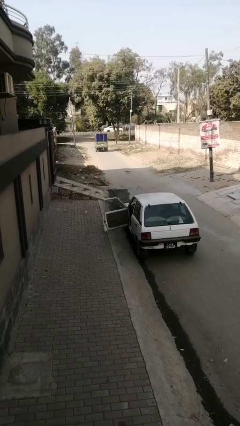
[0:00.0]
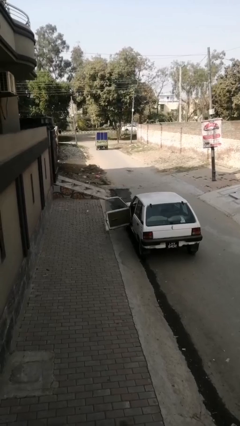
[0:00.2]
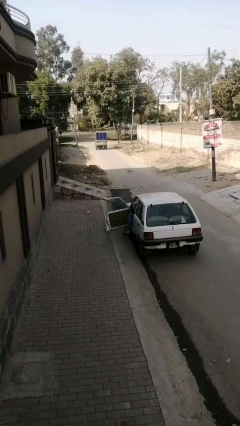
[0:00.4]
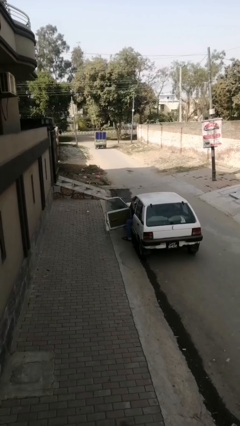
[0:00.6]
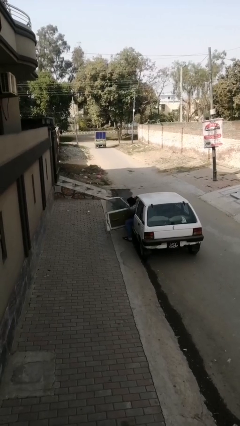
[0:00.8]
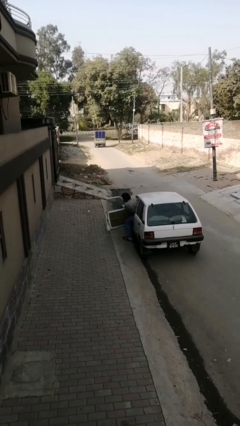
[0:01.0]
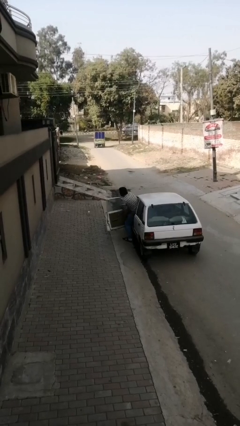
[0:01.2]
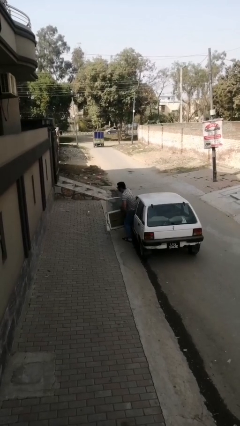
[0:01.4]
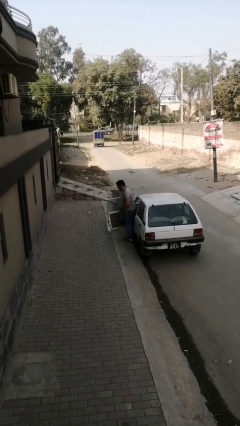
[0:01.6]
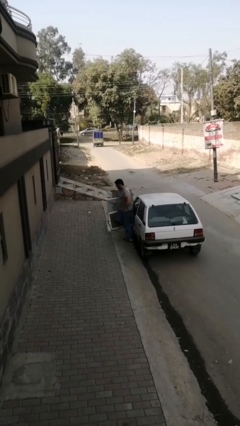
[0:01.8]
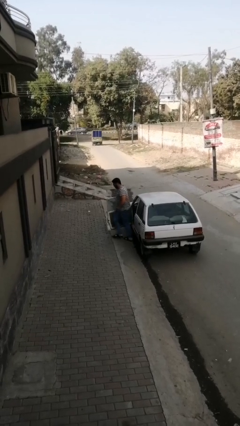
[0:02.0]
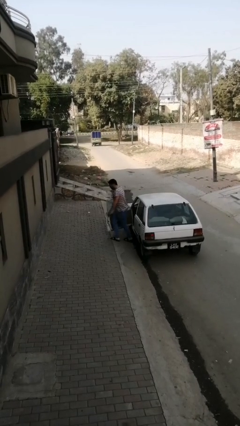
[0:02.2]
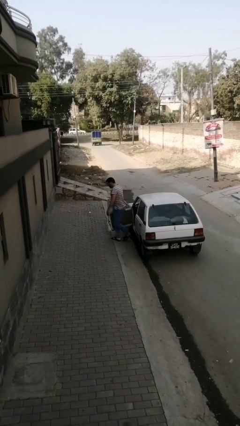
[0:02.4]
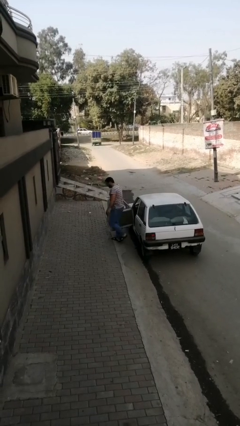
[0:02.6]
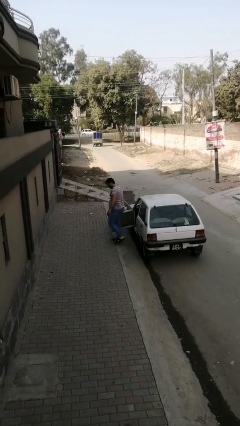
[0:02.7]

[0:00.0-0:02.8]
person exits car

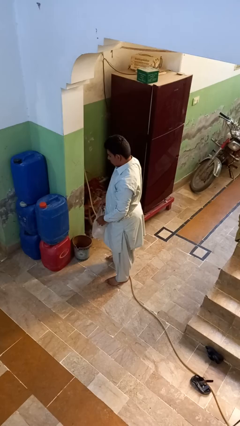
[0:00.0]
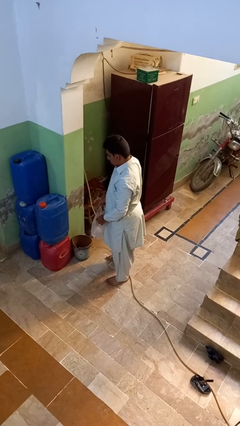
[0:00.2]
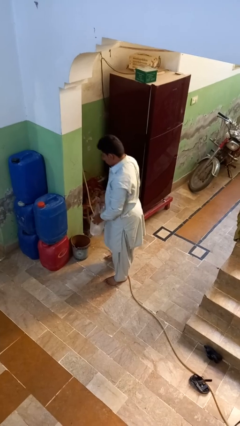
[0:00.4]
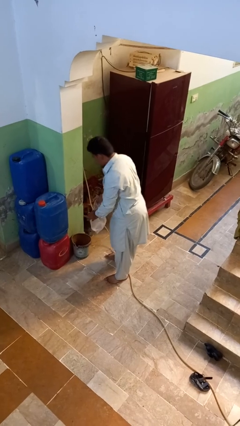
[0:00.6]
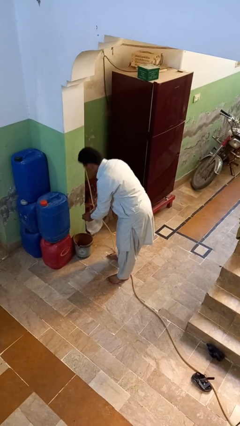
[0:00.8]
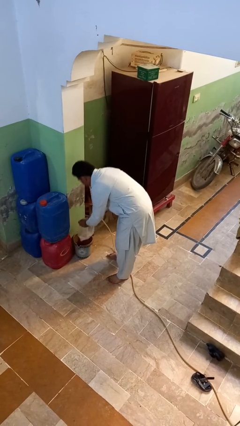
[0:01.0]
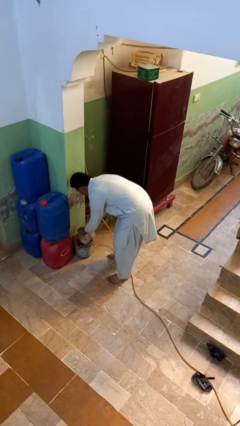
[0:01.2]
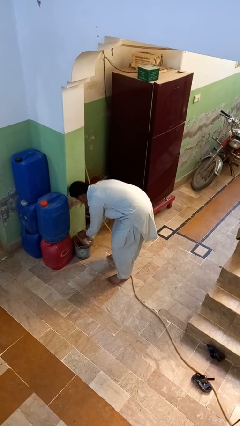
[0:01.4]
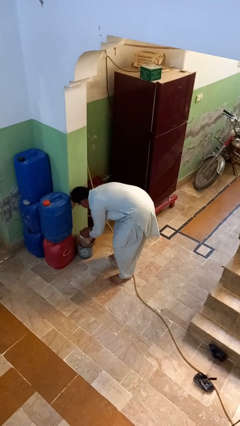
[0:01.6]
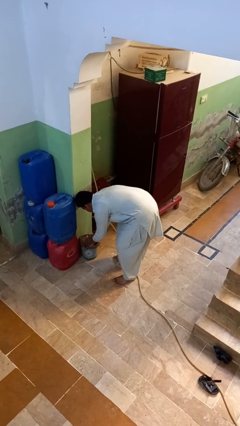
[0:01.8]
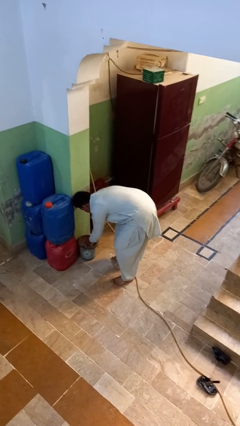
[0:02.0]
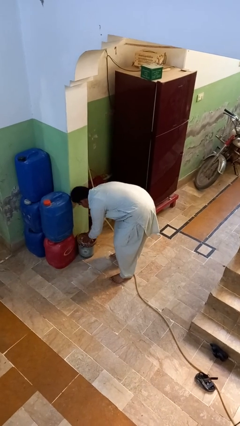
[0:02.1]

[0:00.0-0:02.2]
person inserts trashbag into trashcan

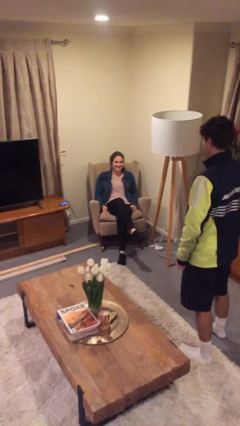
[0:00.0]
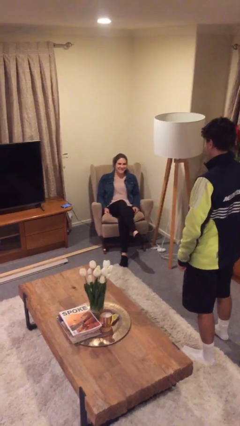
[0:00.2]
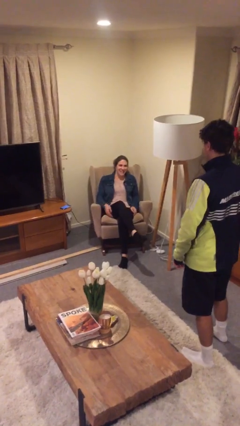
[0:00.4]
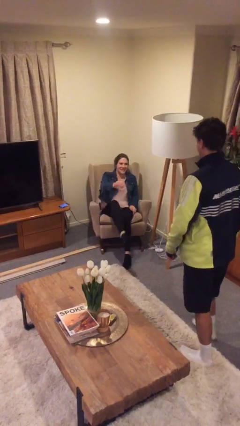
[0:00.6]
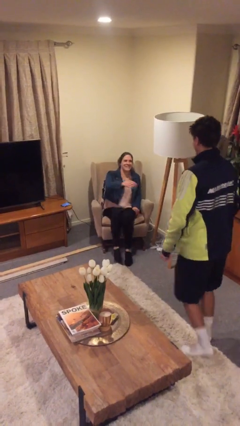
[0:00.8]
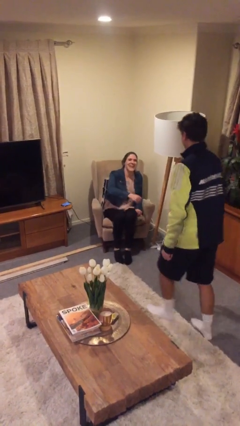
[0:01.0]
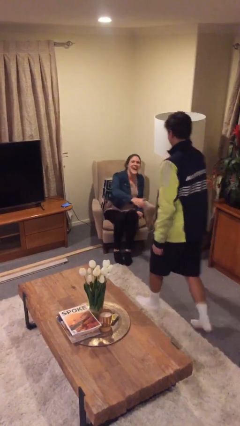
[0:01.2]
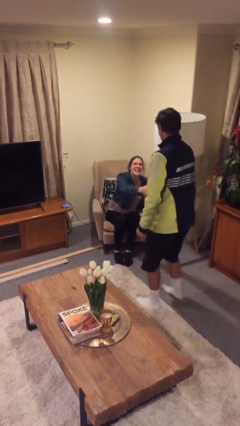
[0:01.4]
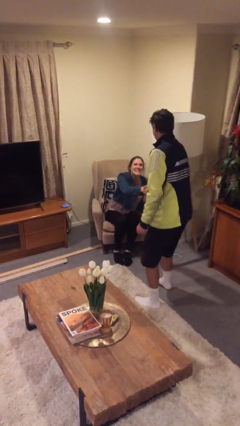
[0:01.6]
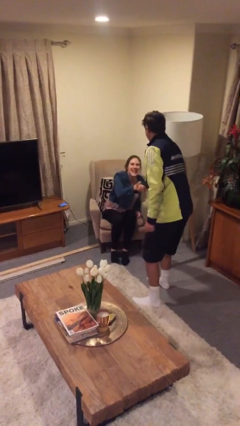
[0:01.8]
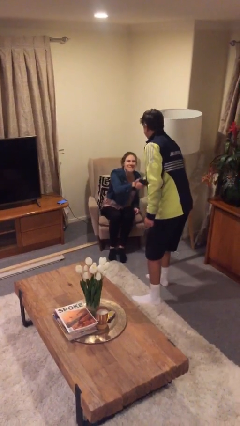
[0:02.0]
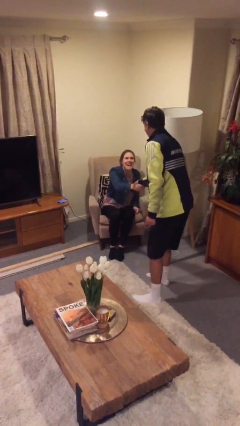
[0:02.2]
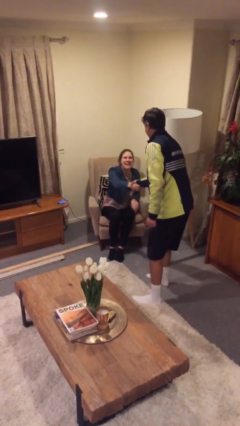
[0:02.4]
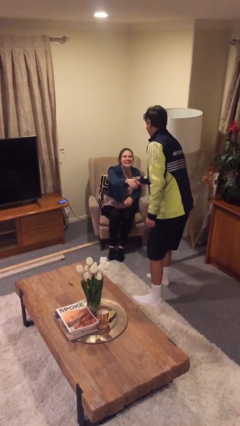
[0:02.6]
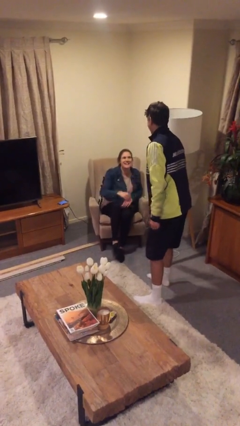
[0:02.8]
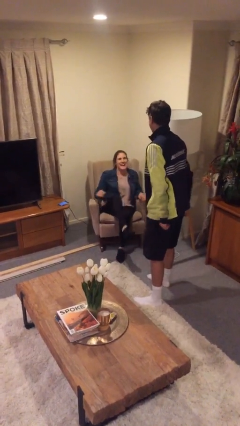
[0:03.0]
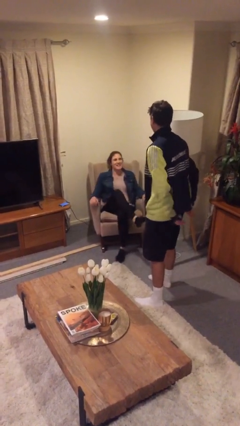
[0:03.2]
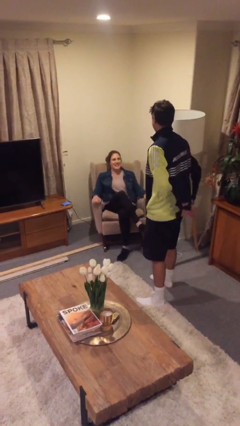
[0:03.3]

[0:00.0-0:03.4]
person shakes hand

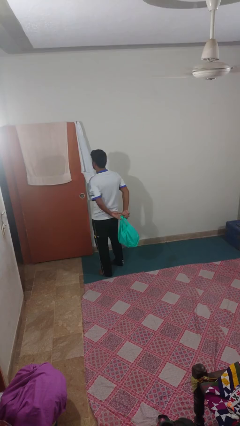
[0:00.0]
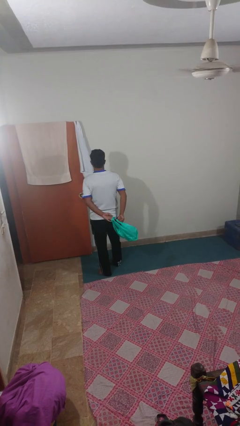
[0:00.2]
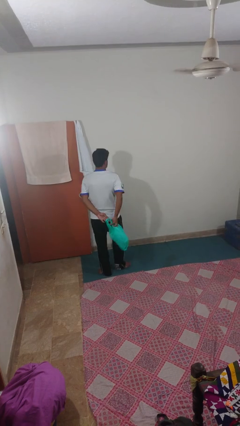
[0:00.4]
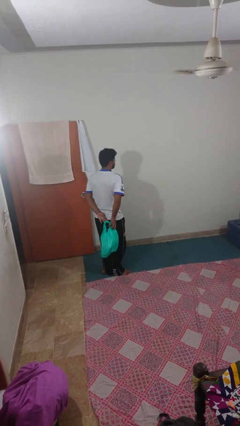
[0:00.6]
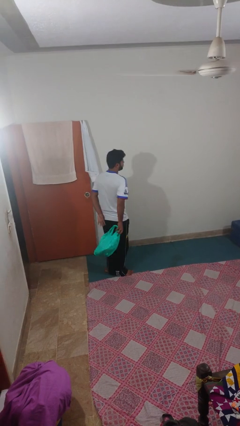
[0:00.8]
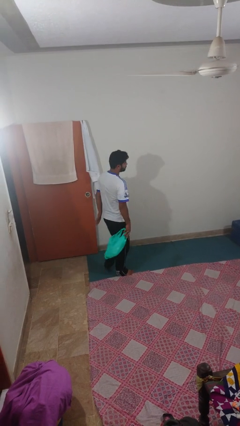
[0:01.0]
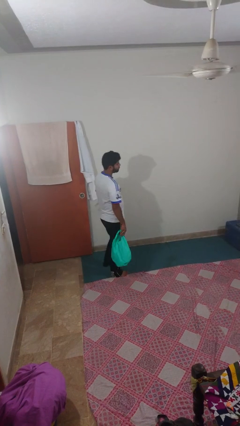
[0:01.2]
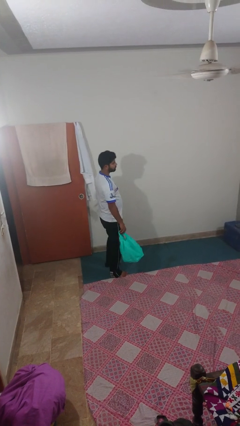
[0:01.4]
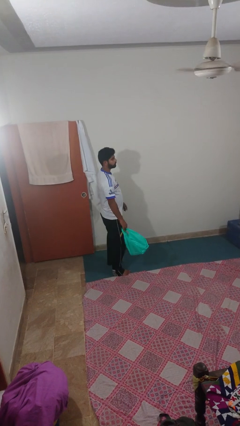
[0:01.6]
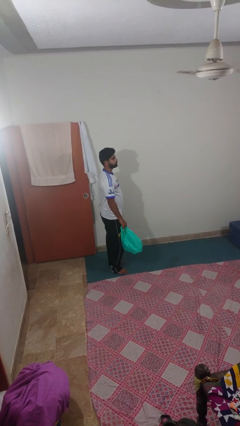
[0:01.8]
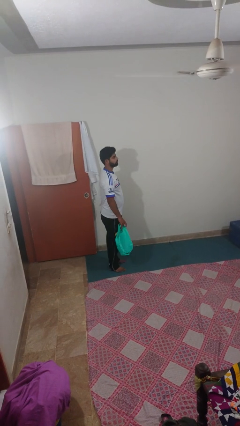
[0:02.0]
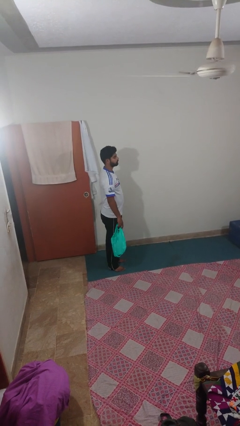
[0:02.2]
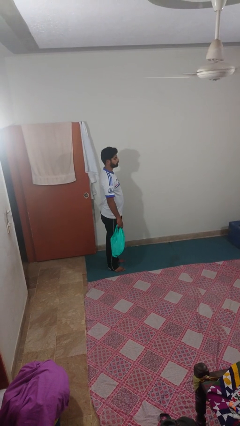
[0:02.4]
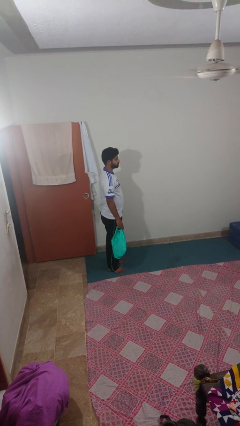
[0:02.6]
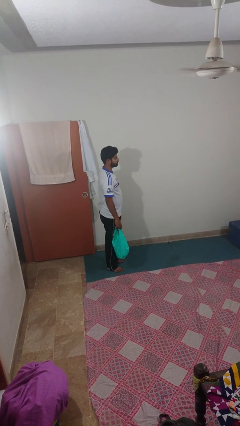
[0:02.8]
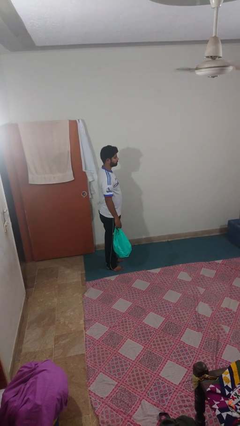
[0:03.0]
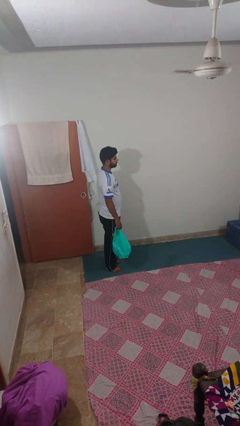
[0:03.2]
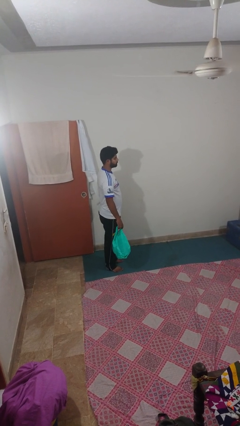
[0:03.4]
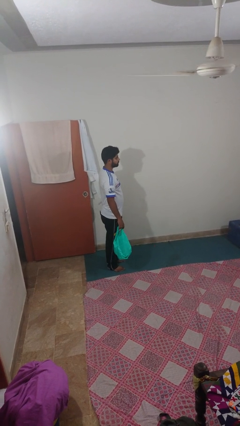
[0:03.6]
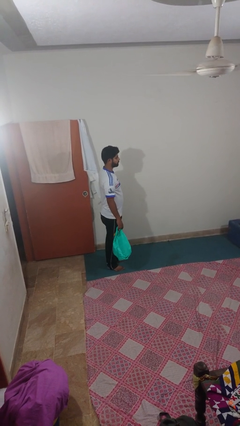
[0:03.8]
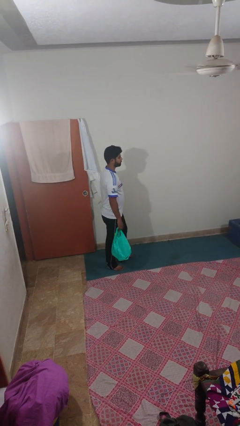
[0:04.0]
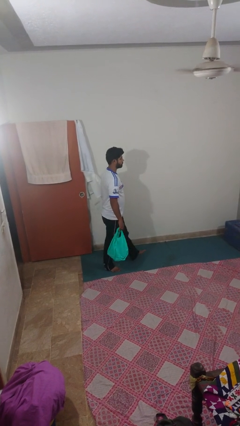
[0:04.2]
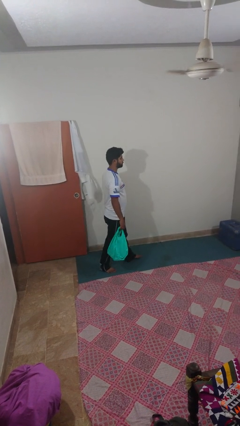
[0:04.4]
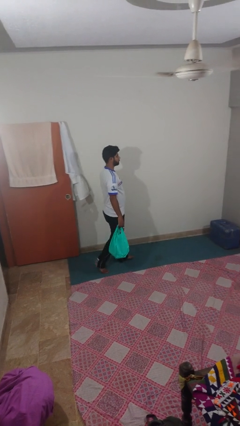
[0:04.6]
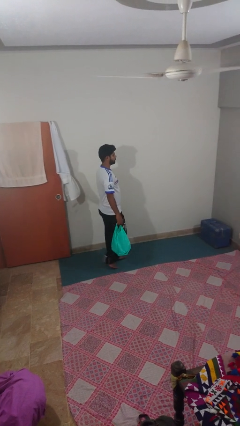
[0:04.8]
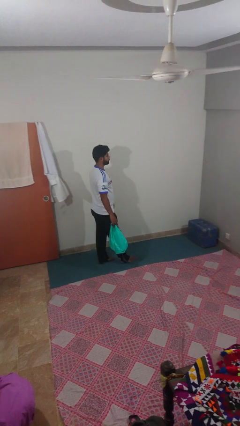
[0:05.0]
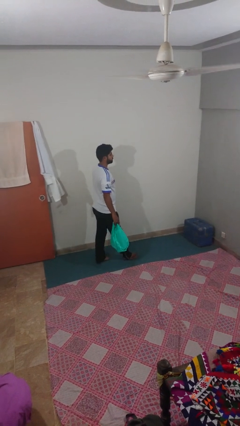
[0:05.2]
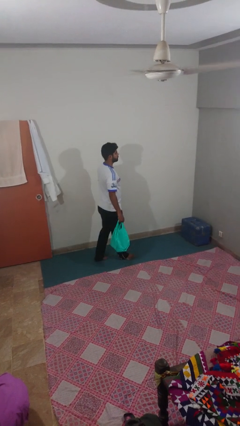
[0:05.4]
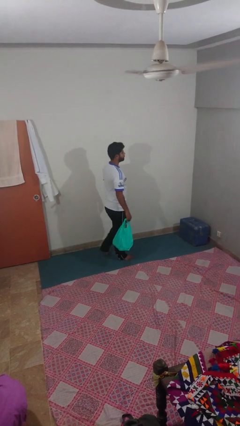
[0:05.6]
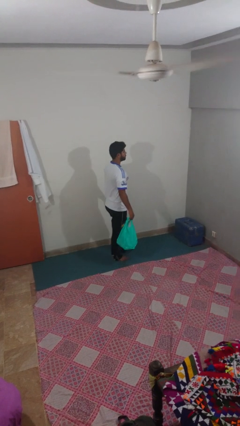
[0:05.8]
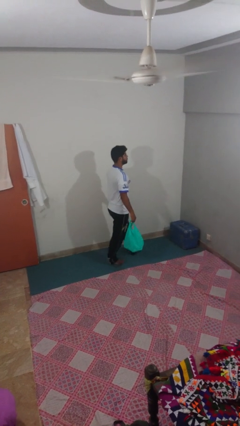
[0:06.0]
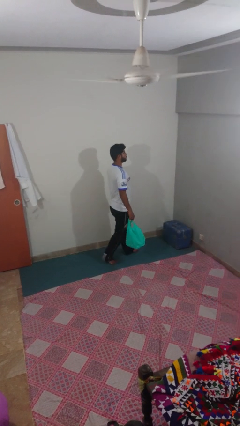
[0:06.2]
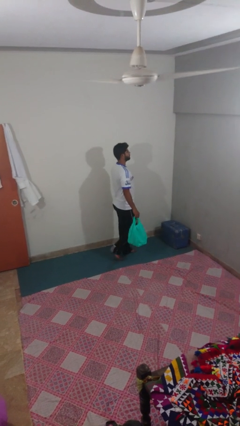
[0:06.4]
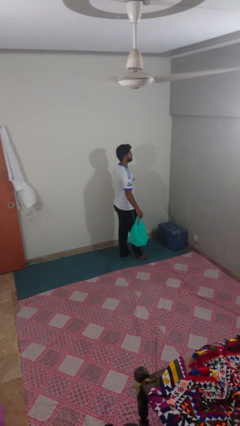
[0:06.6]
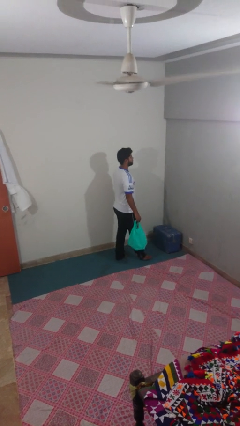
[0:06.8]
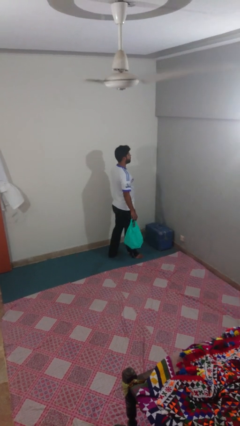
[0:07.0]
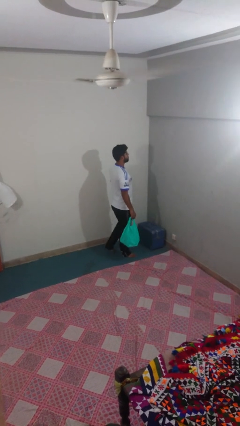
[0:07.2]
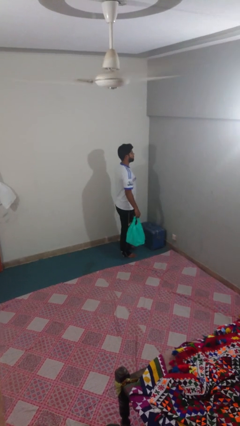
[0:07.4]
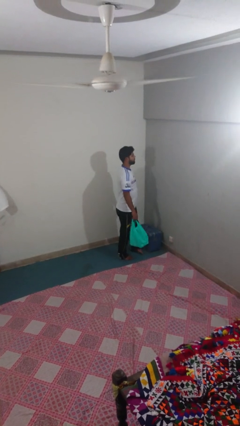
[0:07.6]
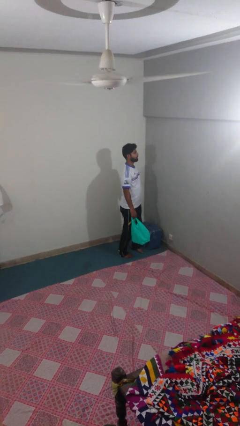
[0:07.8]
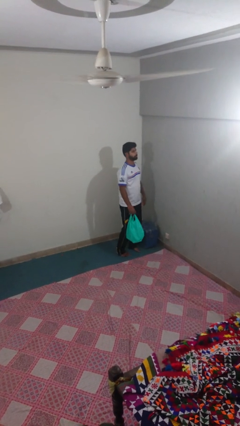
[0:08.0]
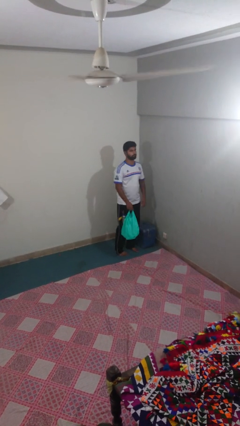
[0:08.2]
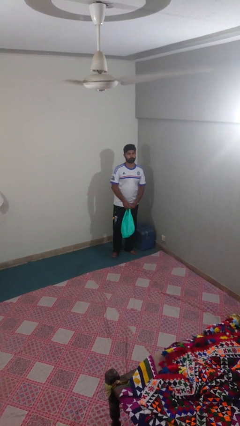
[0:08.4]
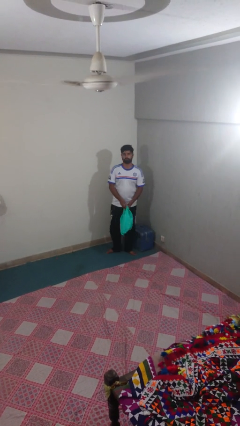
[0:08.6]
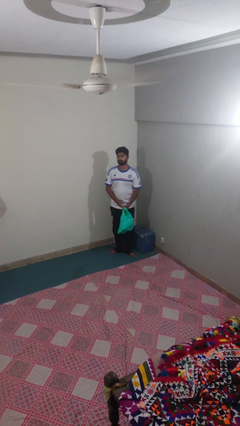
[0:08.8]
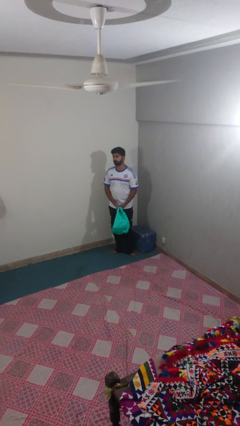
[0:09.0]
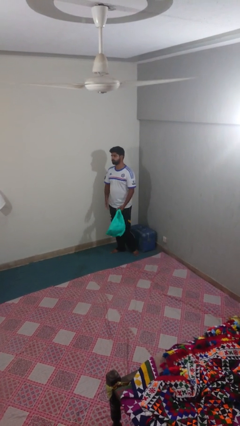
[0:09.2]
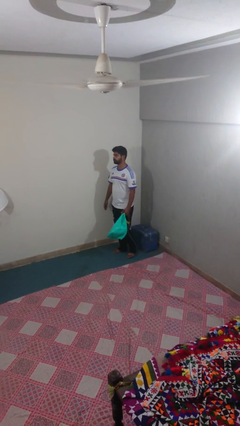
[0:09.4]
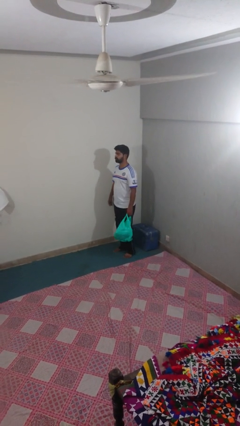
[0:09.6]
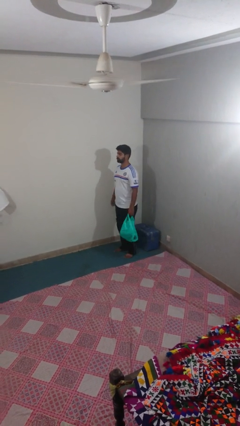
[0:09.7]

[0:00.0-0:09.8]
person carries groceries
